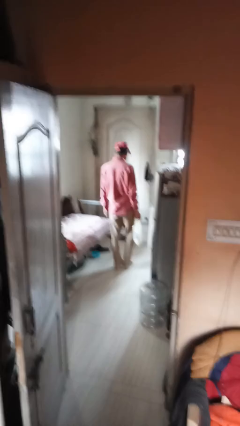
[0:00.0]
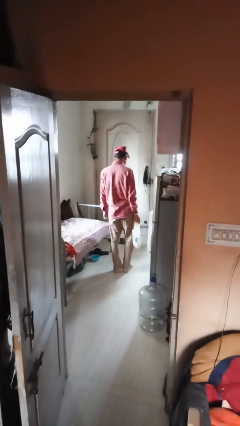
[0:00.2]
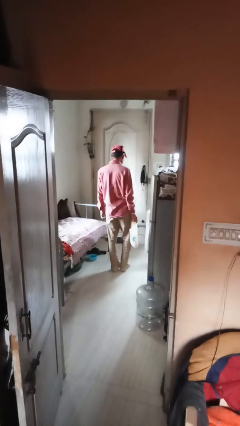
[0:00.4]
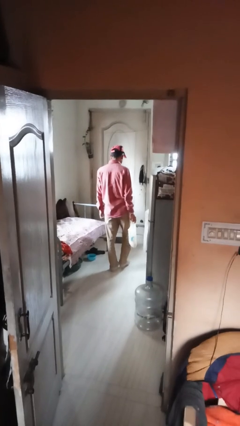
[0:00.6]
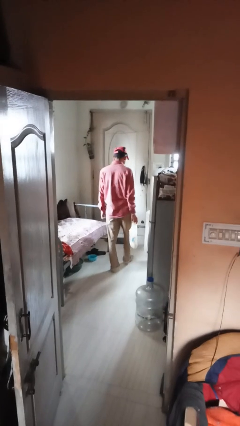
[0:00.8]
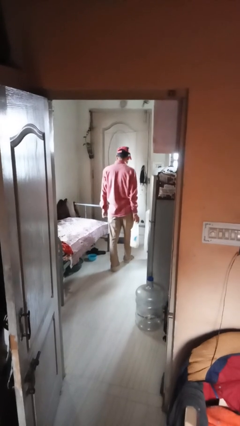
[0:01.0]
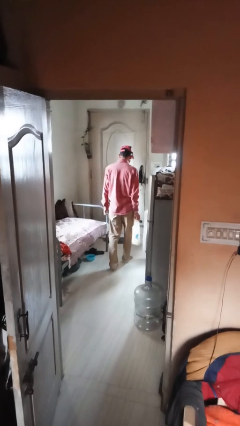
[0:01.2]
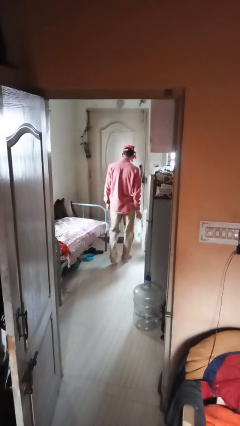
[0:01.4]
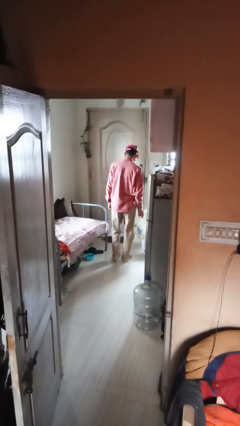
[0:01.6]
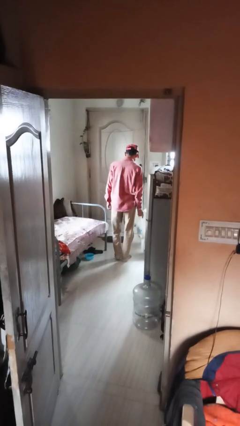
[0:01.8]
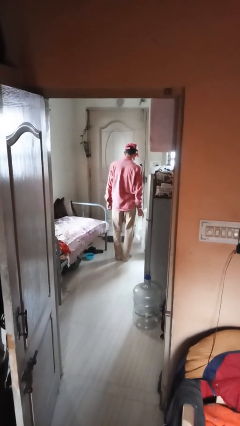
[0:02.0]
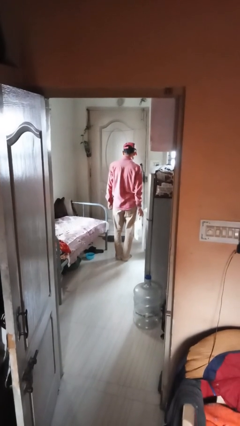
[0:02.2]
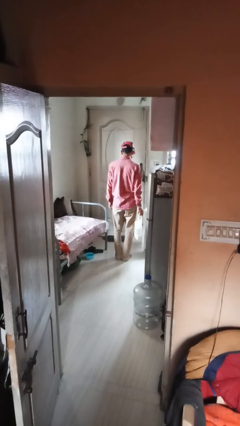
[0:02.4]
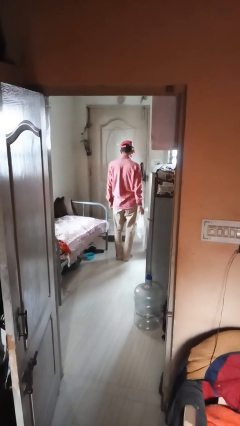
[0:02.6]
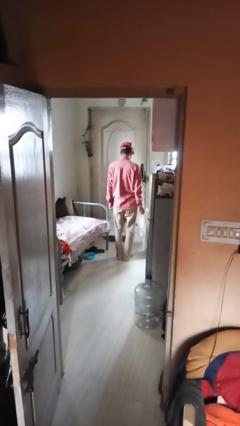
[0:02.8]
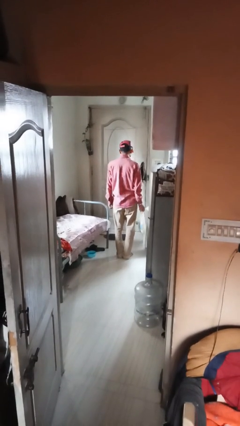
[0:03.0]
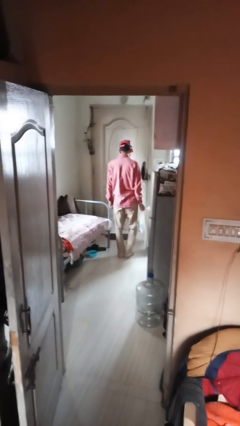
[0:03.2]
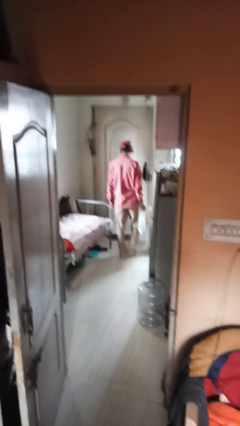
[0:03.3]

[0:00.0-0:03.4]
person carries groceries

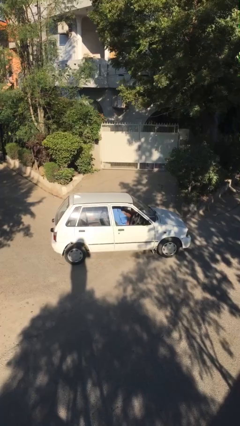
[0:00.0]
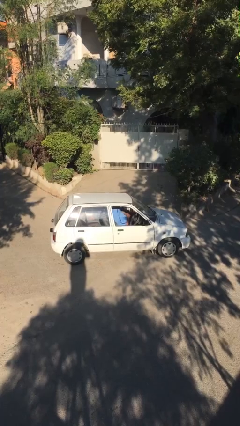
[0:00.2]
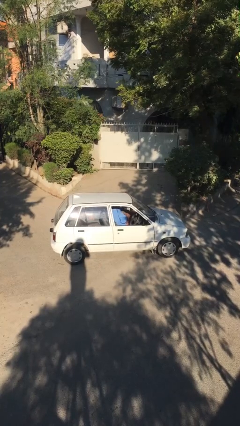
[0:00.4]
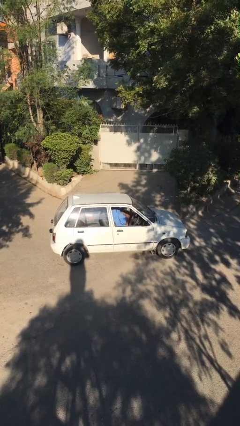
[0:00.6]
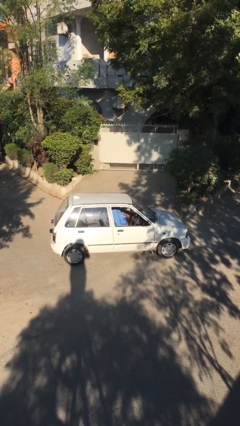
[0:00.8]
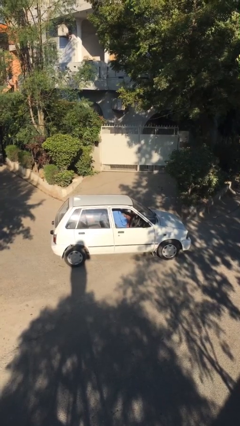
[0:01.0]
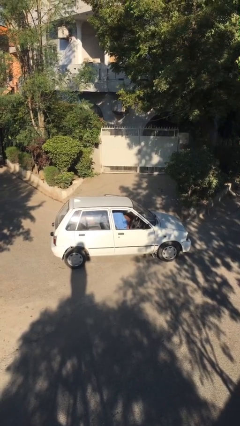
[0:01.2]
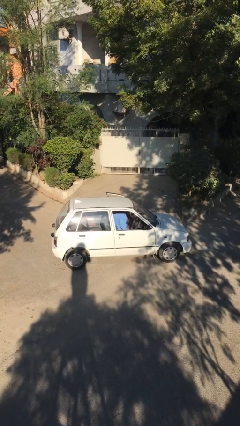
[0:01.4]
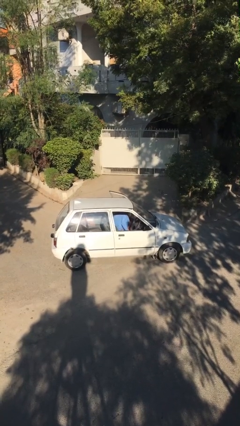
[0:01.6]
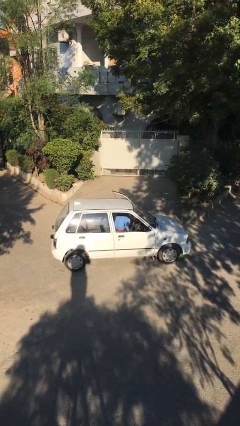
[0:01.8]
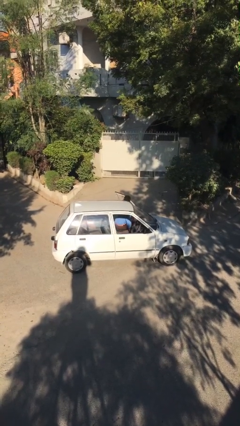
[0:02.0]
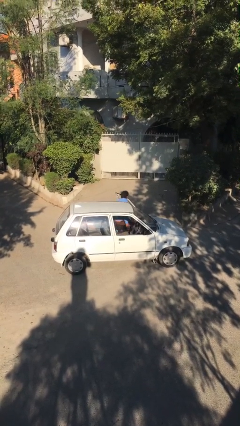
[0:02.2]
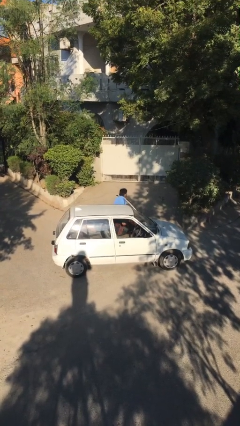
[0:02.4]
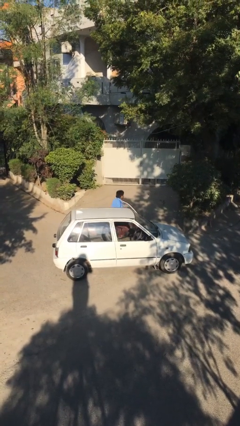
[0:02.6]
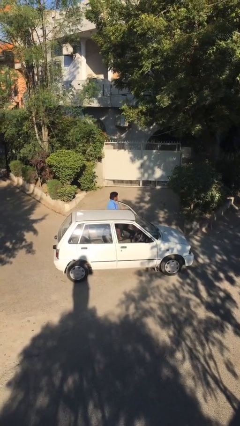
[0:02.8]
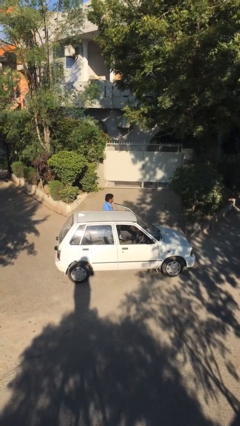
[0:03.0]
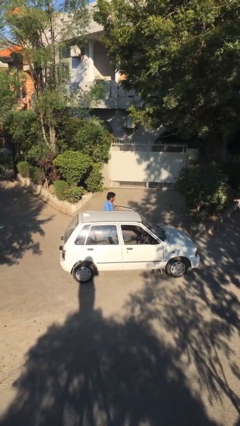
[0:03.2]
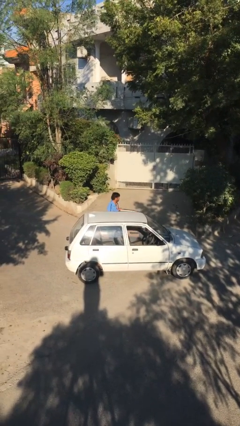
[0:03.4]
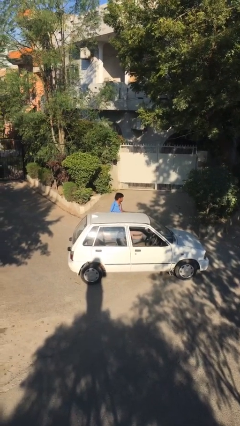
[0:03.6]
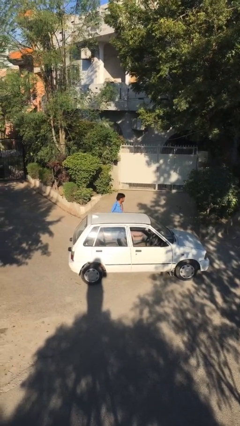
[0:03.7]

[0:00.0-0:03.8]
person exits car

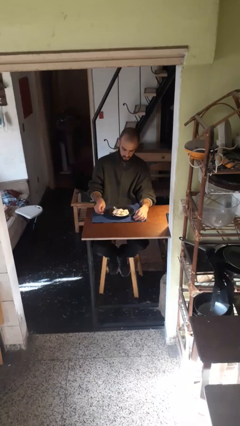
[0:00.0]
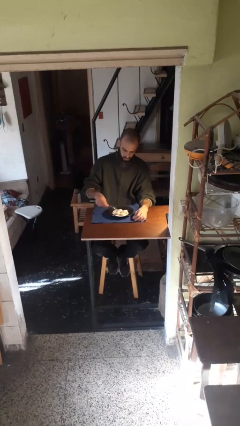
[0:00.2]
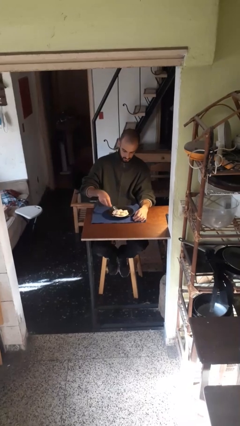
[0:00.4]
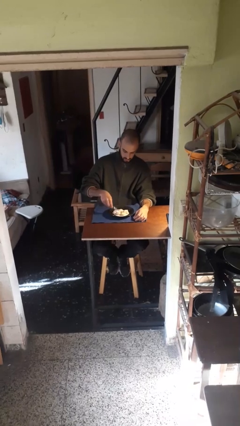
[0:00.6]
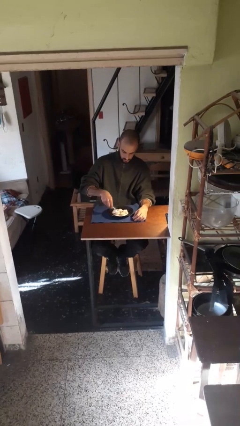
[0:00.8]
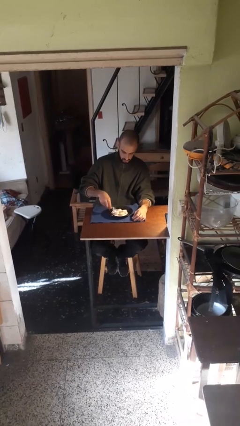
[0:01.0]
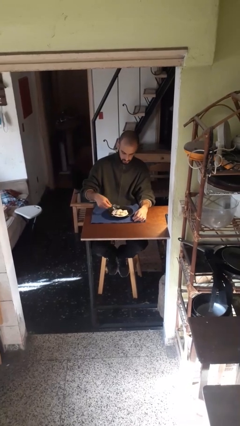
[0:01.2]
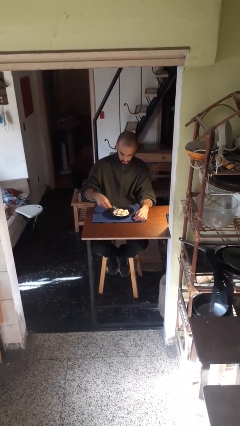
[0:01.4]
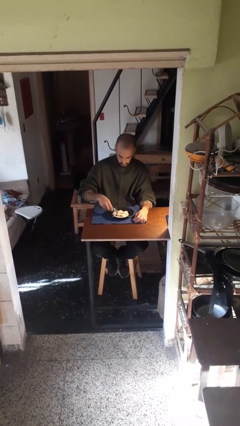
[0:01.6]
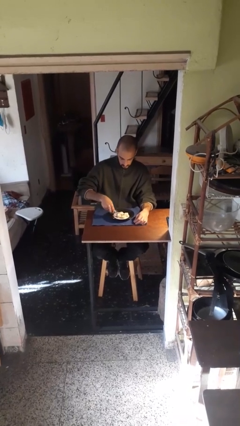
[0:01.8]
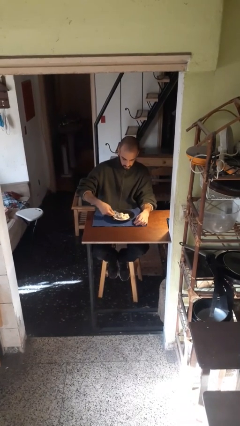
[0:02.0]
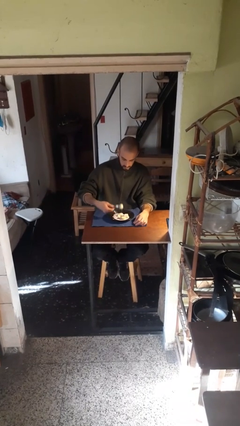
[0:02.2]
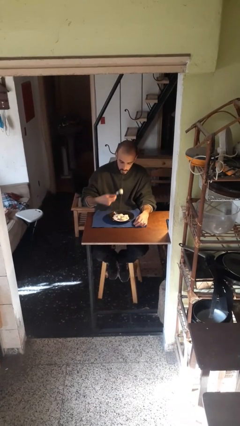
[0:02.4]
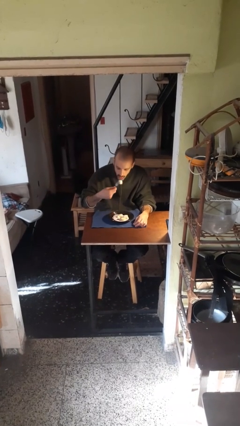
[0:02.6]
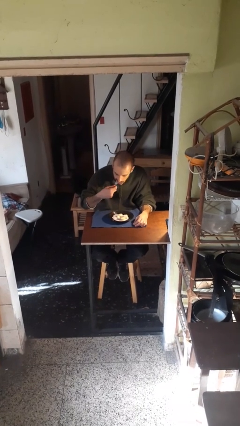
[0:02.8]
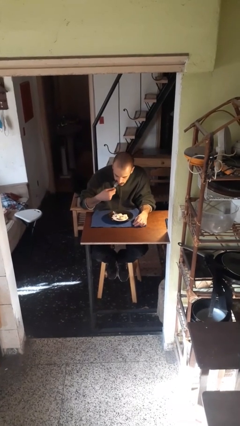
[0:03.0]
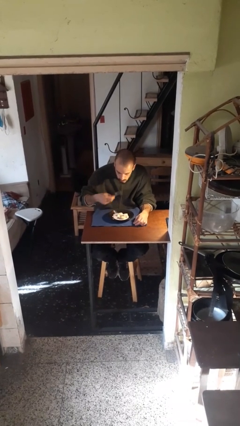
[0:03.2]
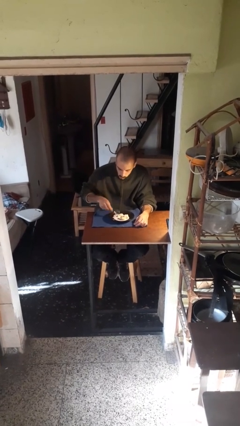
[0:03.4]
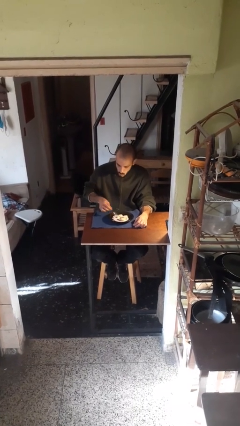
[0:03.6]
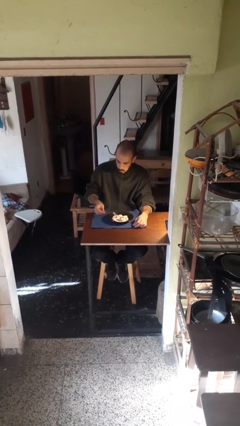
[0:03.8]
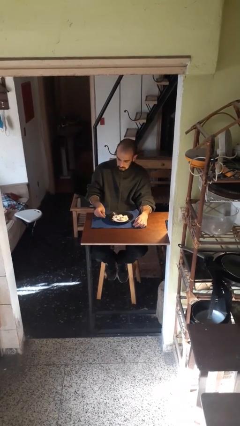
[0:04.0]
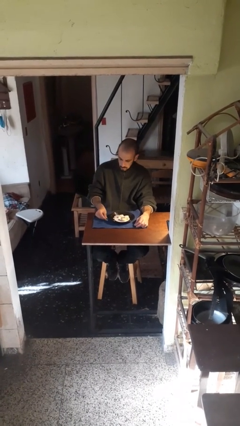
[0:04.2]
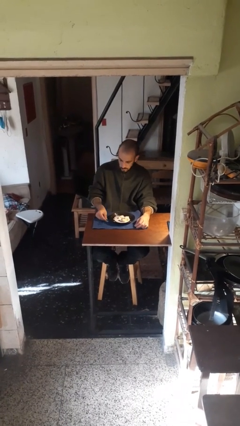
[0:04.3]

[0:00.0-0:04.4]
person eats with utensil

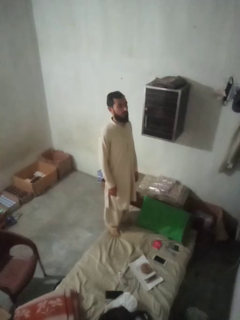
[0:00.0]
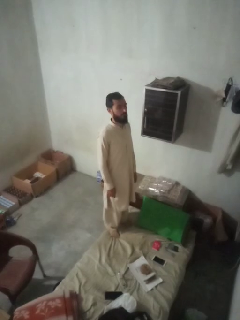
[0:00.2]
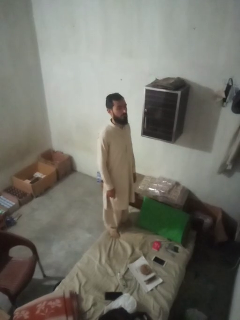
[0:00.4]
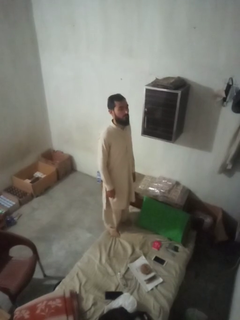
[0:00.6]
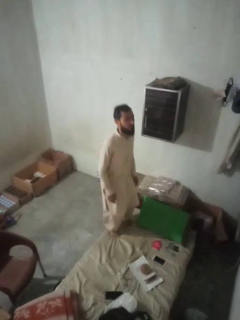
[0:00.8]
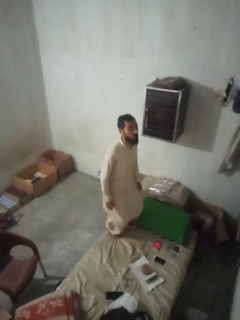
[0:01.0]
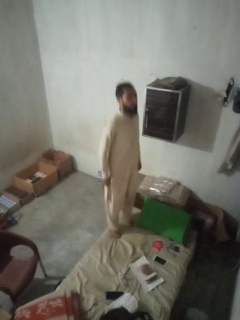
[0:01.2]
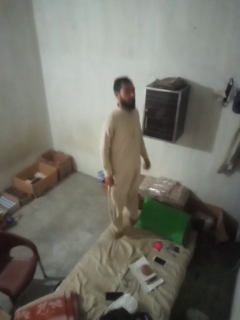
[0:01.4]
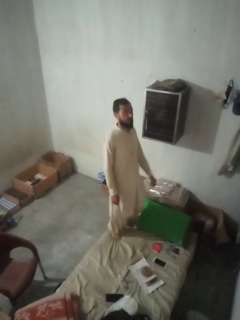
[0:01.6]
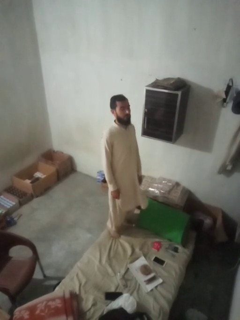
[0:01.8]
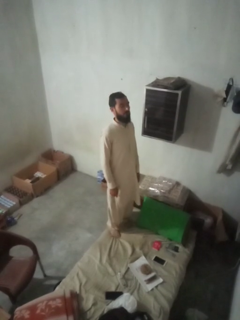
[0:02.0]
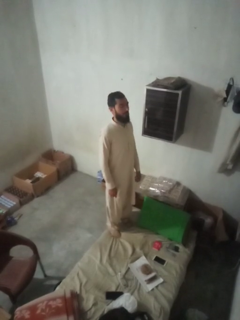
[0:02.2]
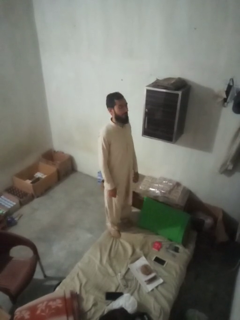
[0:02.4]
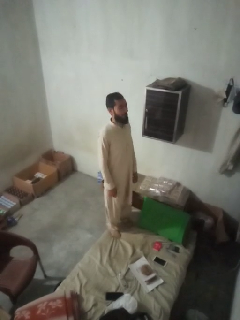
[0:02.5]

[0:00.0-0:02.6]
person jumps on couch

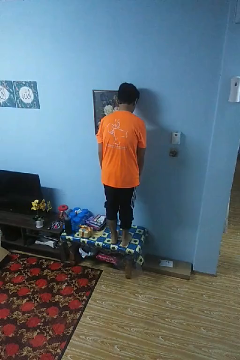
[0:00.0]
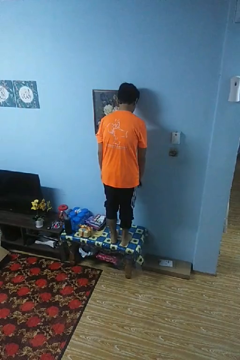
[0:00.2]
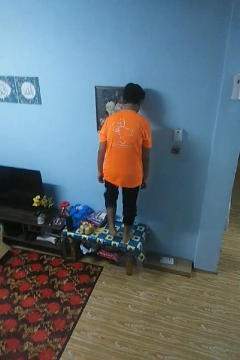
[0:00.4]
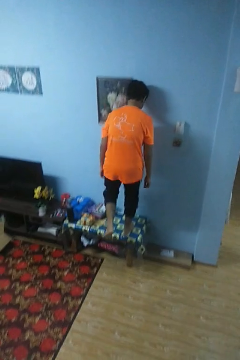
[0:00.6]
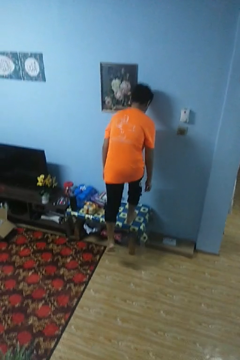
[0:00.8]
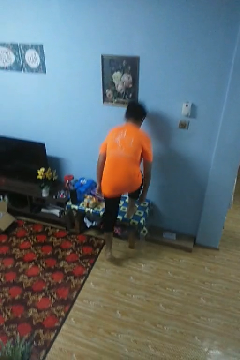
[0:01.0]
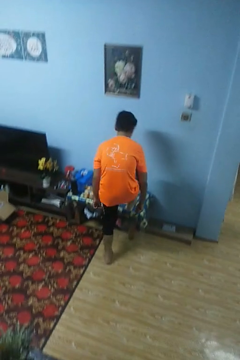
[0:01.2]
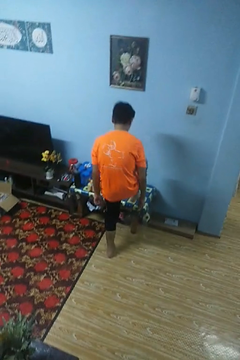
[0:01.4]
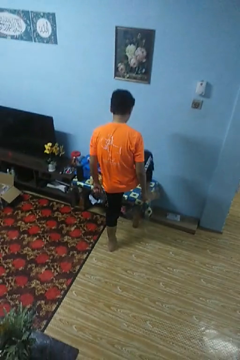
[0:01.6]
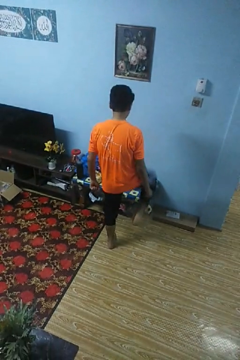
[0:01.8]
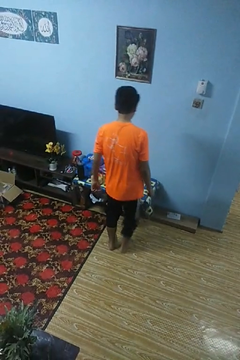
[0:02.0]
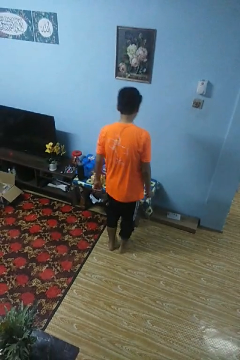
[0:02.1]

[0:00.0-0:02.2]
person climbs off table

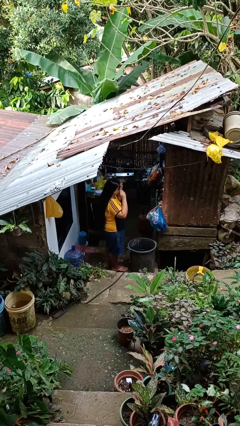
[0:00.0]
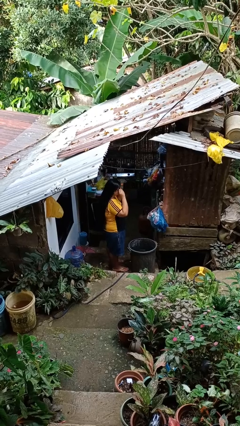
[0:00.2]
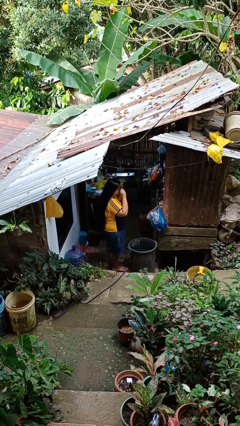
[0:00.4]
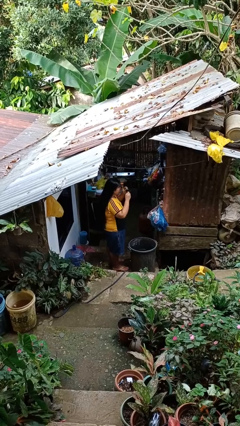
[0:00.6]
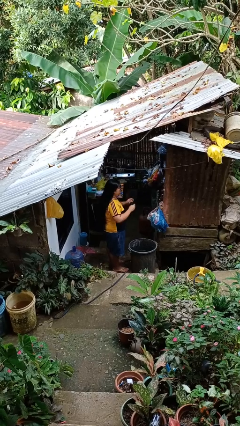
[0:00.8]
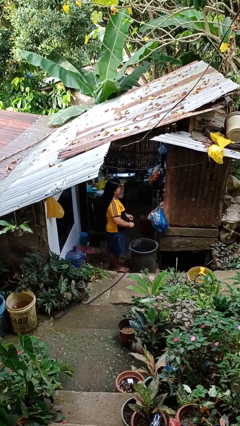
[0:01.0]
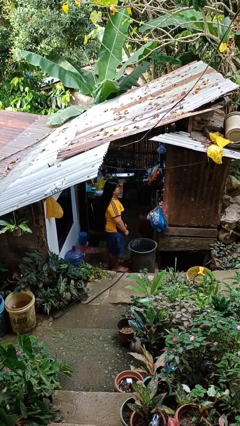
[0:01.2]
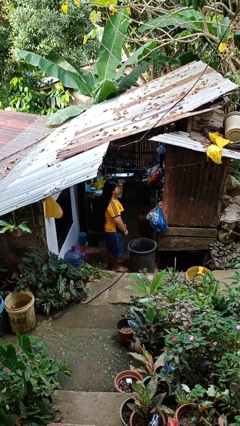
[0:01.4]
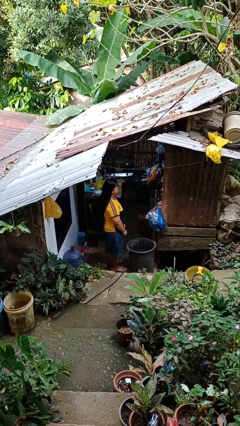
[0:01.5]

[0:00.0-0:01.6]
person takes off sunglasses

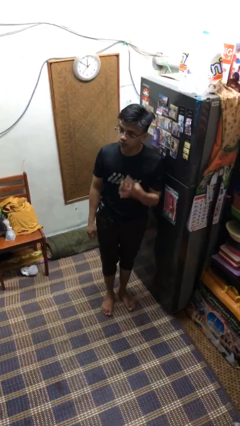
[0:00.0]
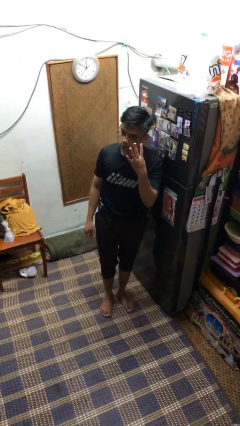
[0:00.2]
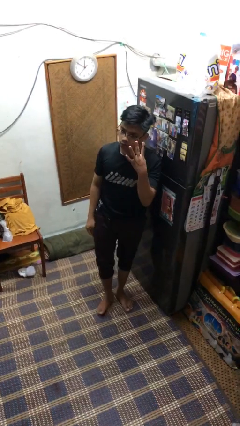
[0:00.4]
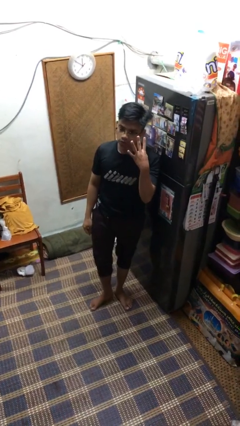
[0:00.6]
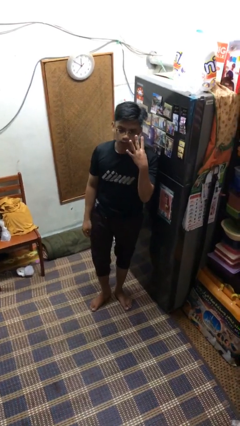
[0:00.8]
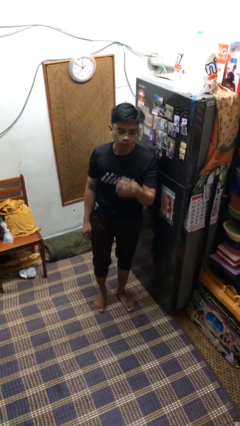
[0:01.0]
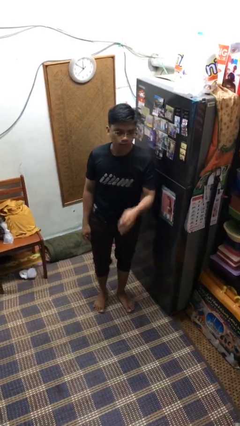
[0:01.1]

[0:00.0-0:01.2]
person gestures number four
